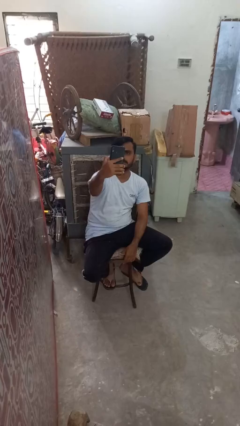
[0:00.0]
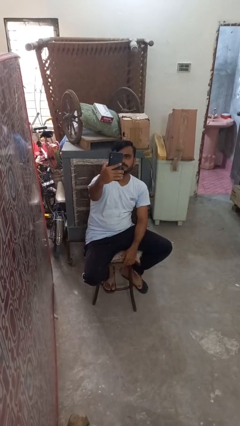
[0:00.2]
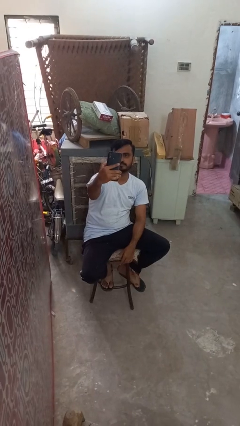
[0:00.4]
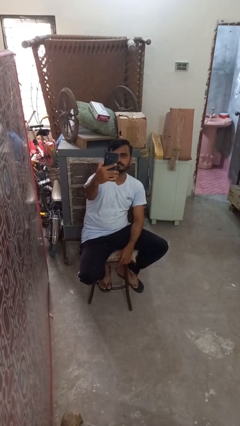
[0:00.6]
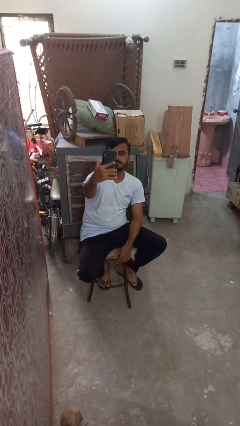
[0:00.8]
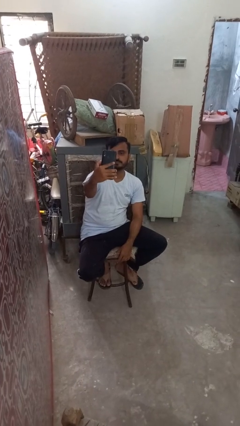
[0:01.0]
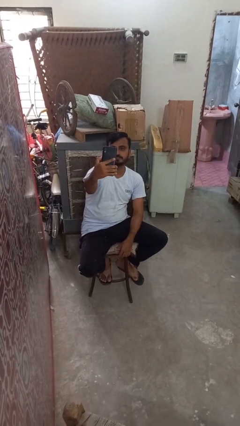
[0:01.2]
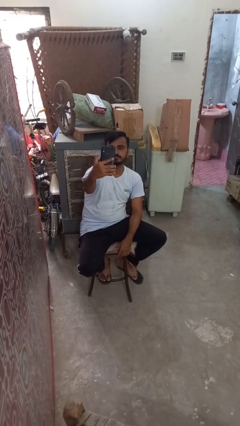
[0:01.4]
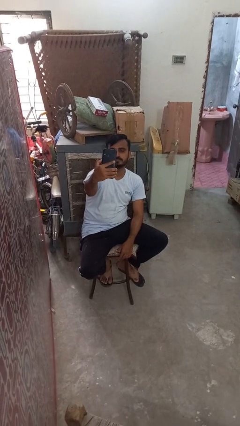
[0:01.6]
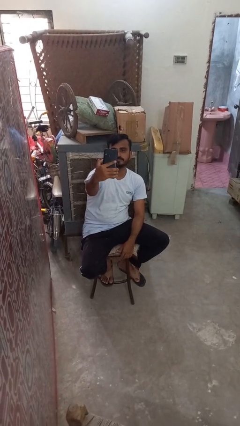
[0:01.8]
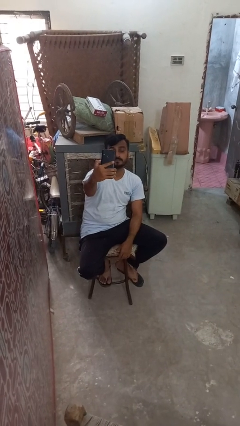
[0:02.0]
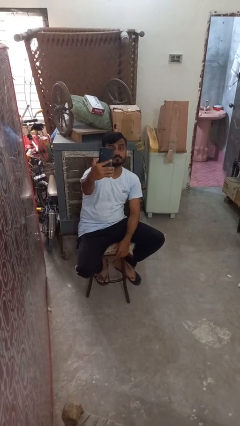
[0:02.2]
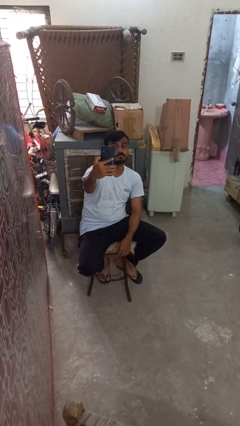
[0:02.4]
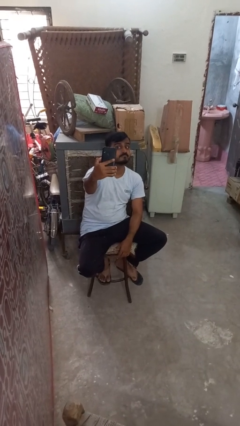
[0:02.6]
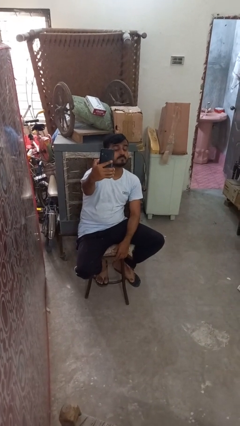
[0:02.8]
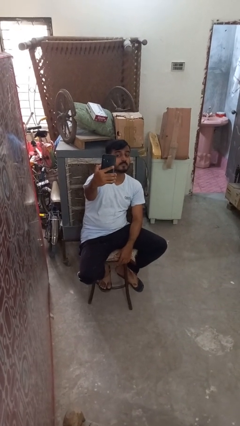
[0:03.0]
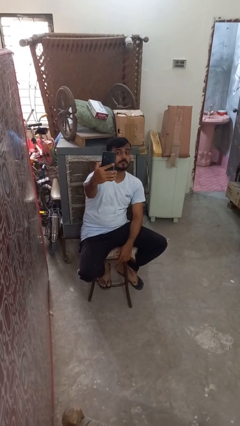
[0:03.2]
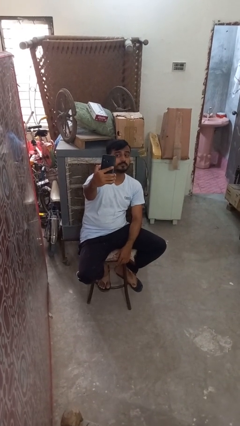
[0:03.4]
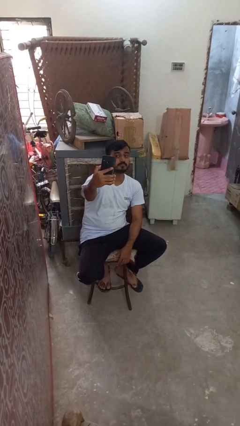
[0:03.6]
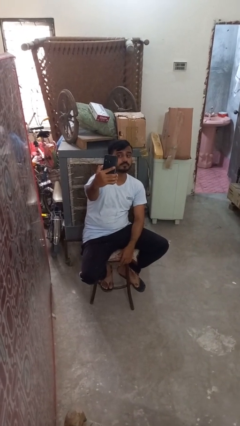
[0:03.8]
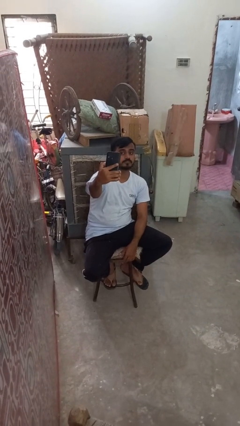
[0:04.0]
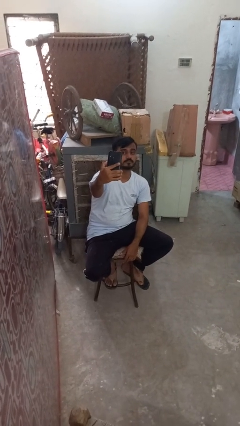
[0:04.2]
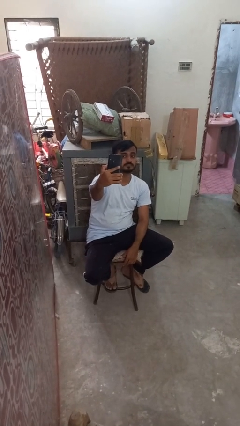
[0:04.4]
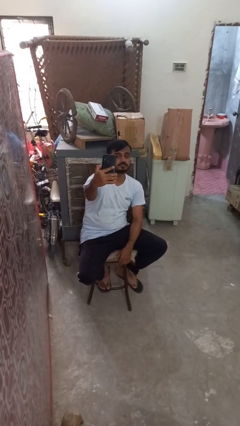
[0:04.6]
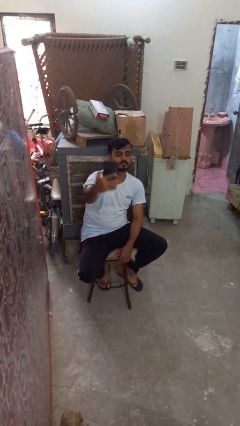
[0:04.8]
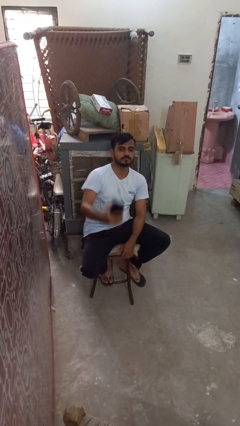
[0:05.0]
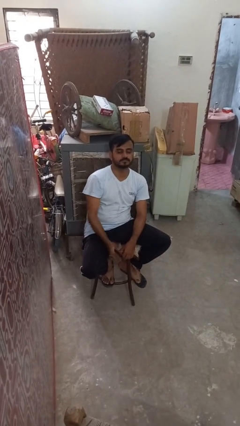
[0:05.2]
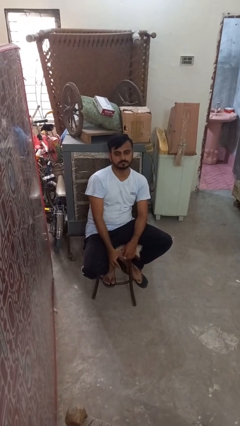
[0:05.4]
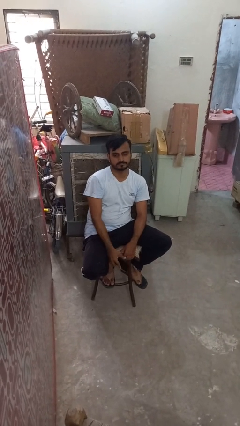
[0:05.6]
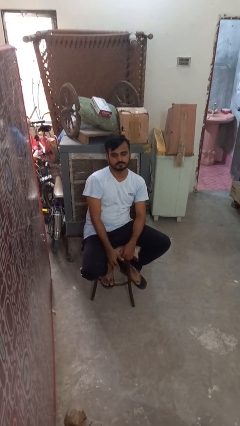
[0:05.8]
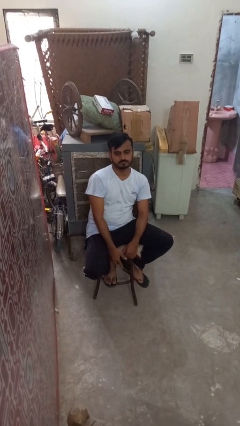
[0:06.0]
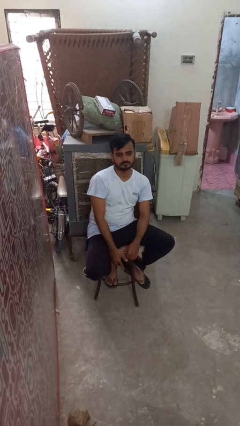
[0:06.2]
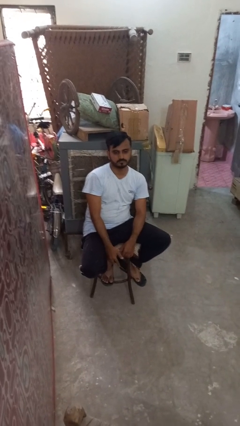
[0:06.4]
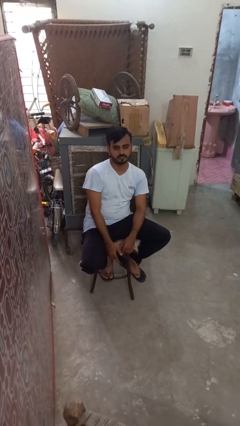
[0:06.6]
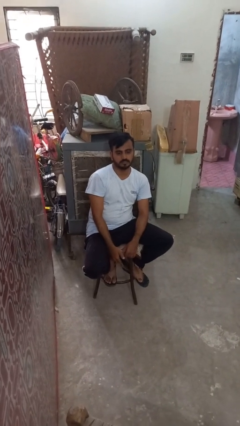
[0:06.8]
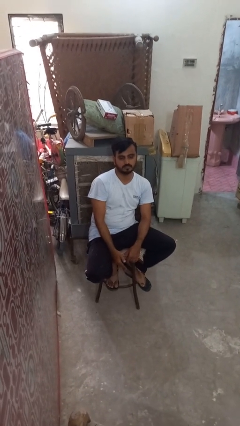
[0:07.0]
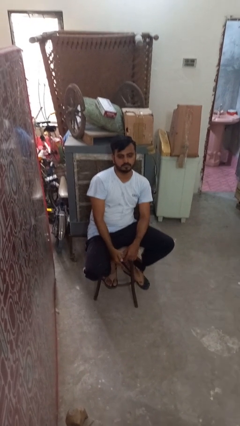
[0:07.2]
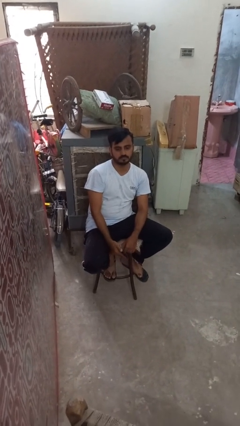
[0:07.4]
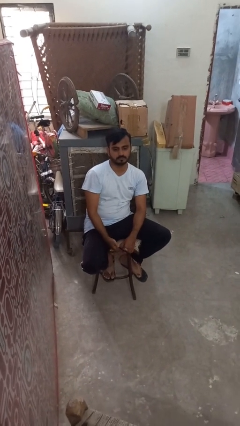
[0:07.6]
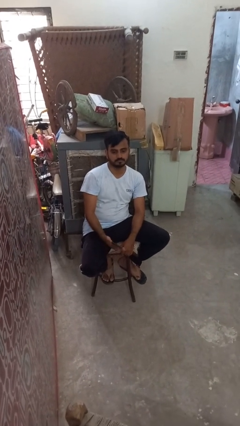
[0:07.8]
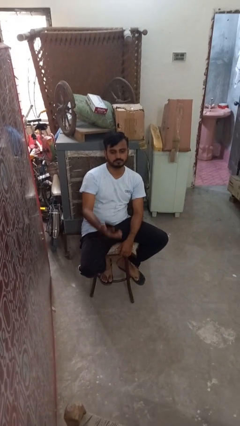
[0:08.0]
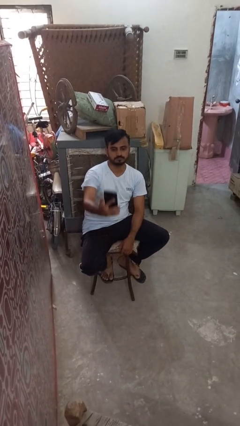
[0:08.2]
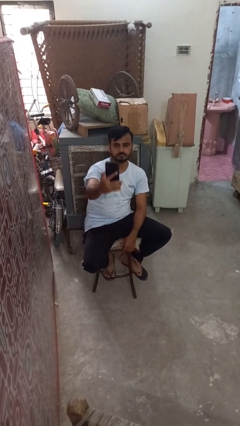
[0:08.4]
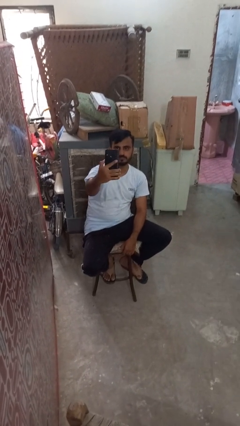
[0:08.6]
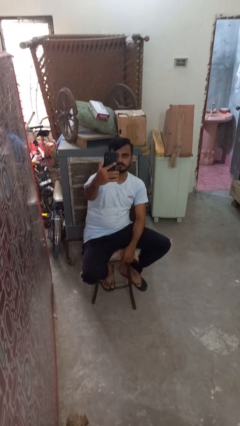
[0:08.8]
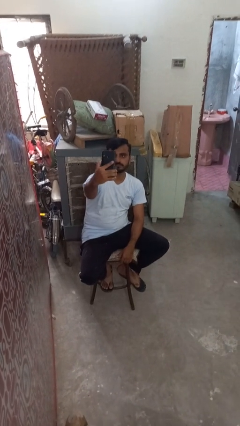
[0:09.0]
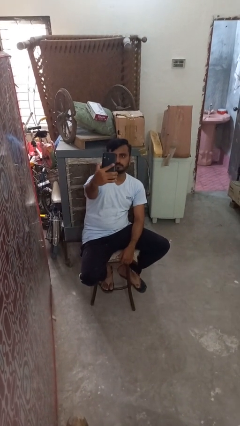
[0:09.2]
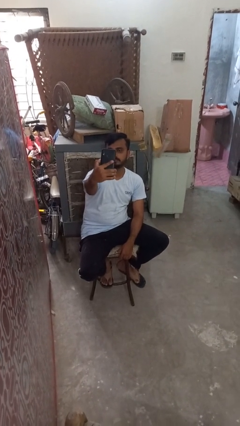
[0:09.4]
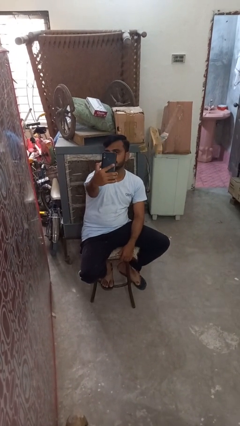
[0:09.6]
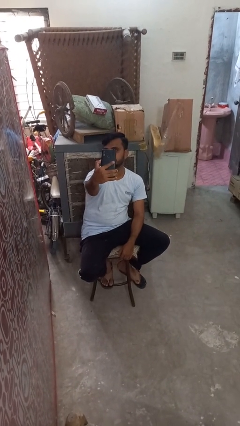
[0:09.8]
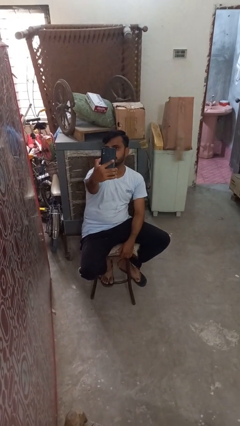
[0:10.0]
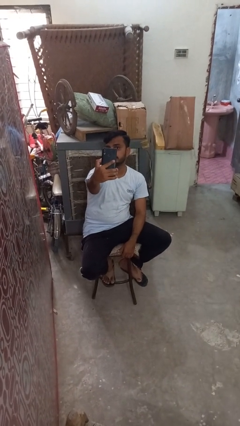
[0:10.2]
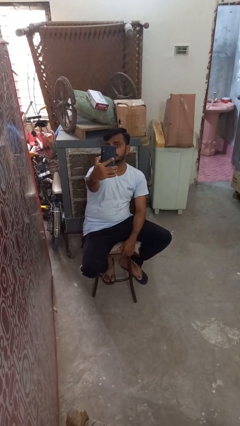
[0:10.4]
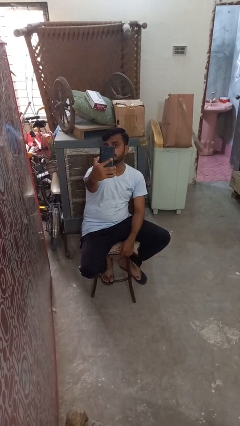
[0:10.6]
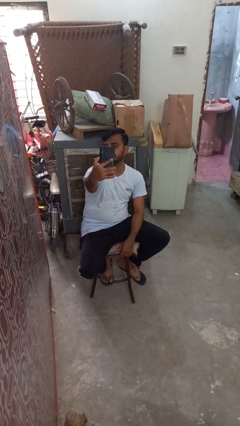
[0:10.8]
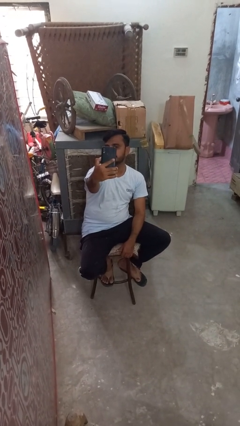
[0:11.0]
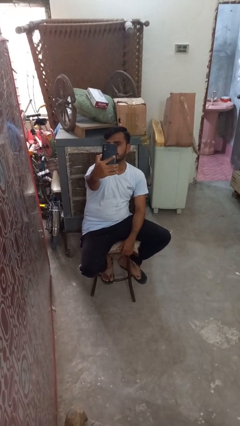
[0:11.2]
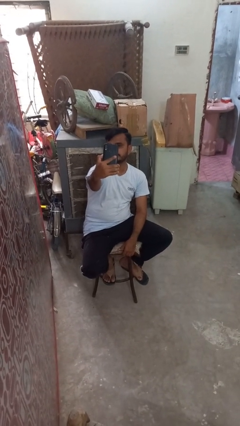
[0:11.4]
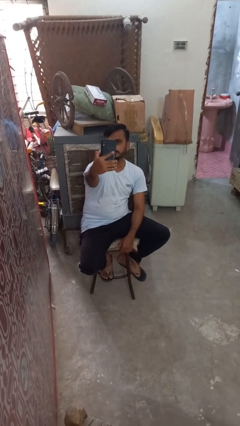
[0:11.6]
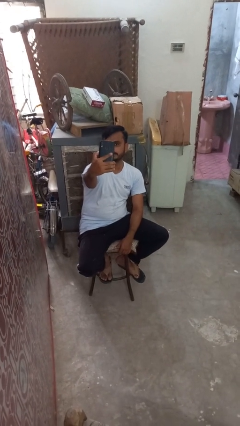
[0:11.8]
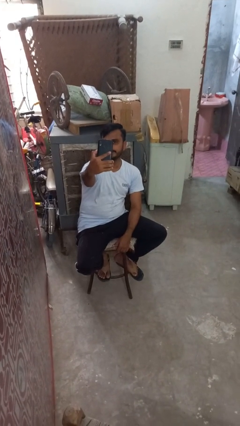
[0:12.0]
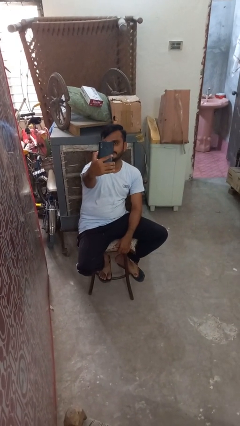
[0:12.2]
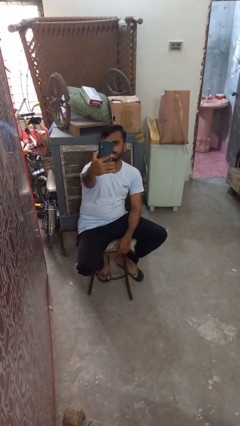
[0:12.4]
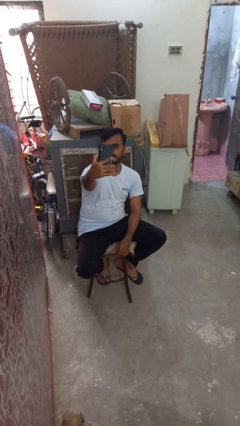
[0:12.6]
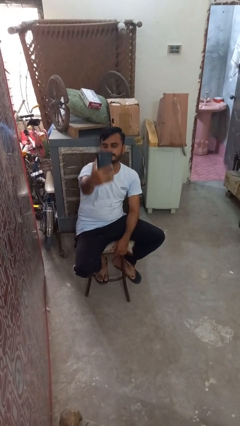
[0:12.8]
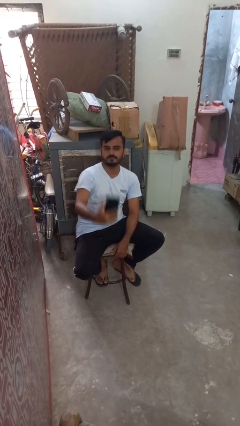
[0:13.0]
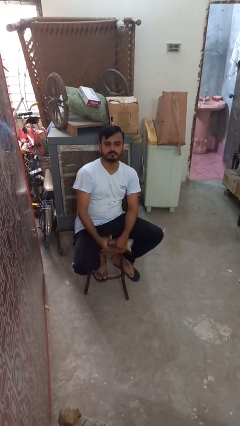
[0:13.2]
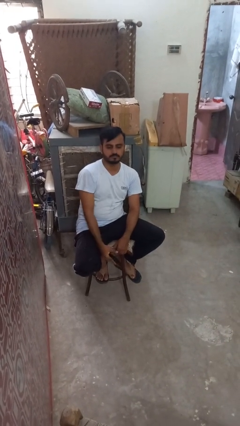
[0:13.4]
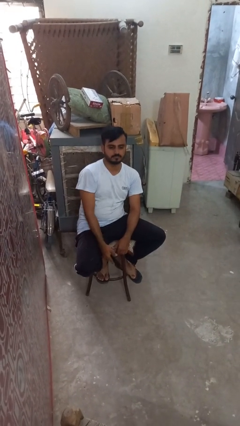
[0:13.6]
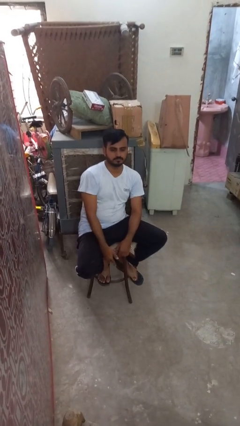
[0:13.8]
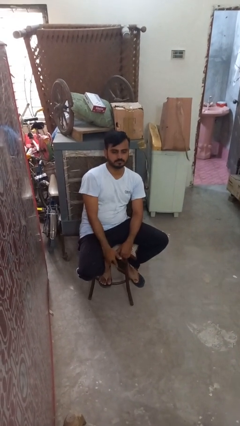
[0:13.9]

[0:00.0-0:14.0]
person takes selfie

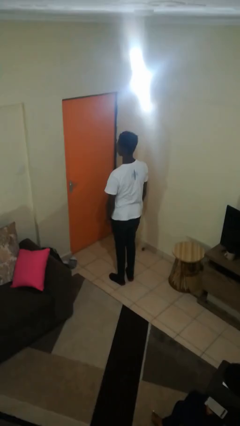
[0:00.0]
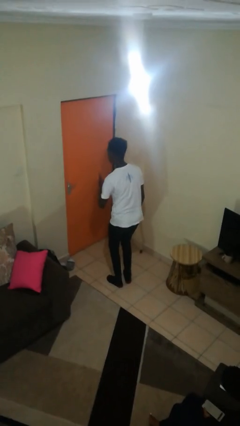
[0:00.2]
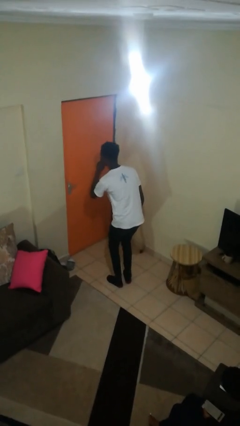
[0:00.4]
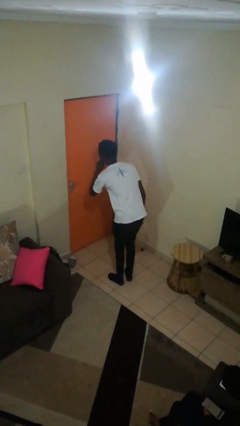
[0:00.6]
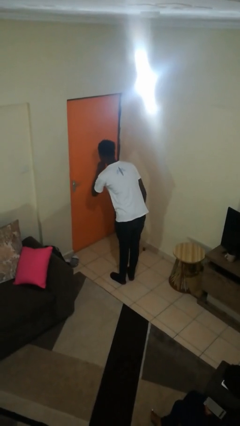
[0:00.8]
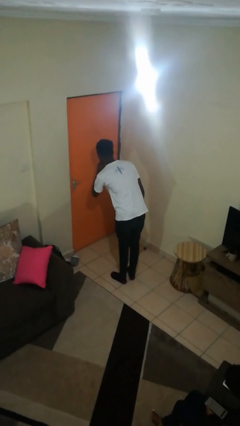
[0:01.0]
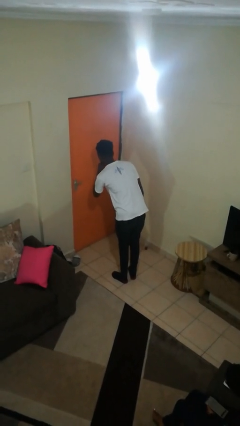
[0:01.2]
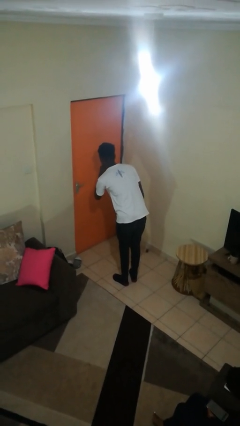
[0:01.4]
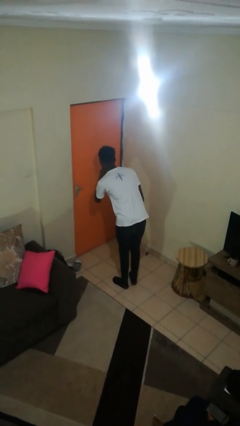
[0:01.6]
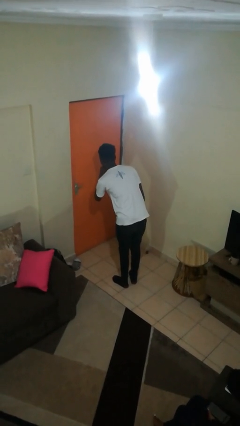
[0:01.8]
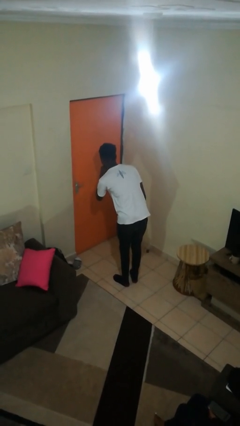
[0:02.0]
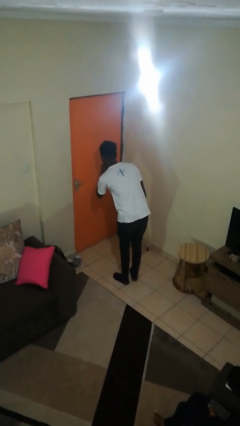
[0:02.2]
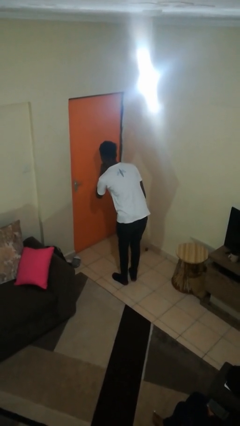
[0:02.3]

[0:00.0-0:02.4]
person gestures be quiet

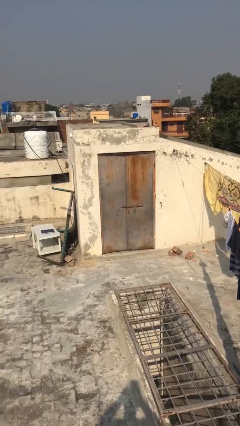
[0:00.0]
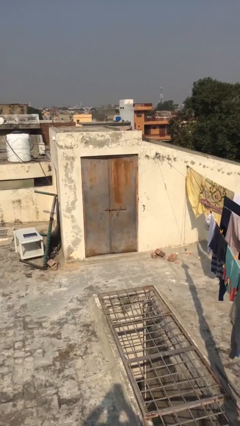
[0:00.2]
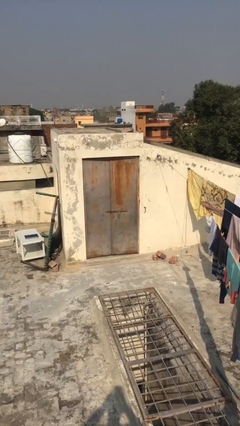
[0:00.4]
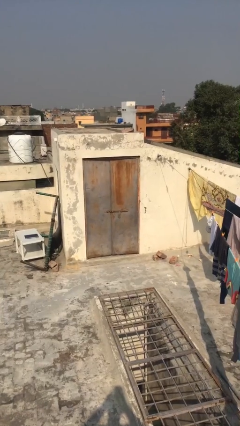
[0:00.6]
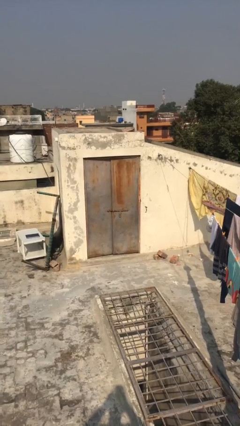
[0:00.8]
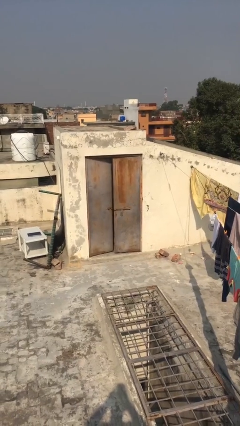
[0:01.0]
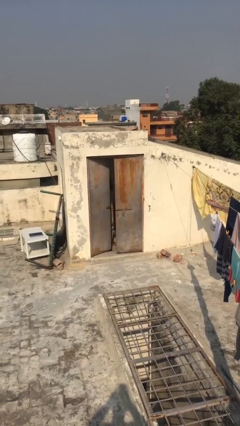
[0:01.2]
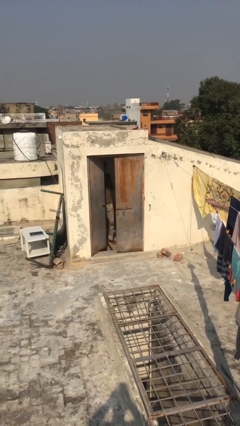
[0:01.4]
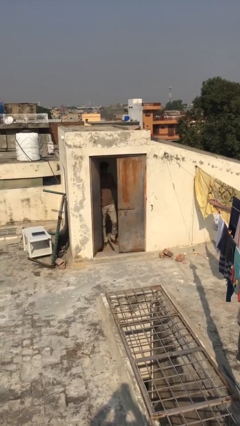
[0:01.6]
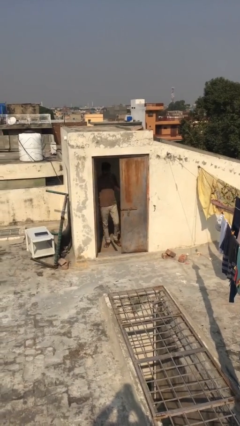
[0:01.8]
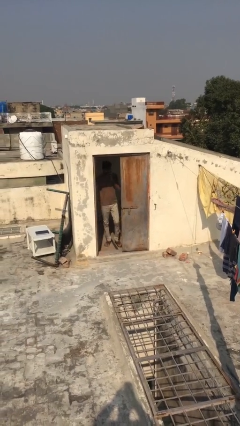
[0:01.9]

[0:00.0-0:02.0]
person opens facility door
